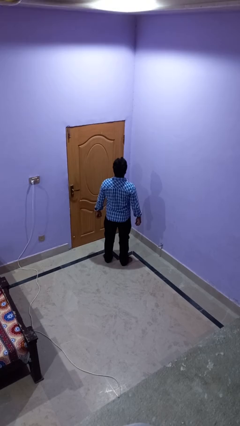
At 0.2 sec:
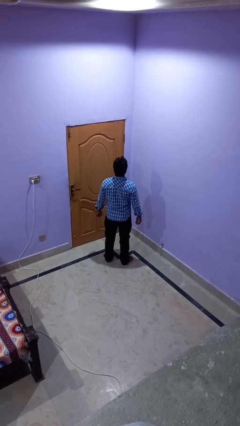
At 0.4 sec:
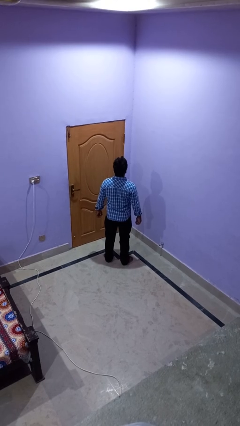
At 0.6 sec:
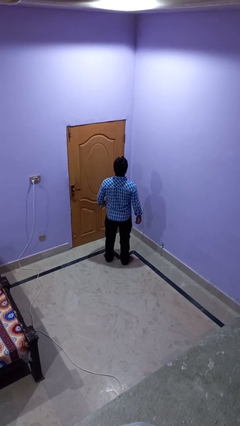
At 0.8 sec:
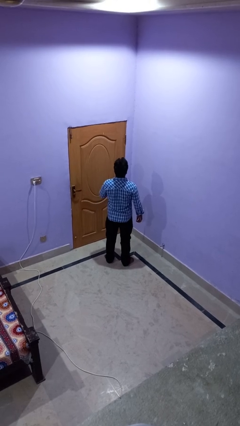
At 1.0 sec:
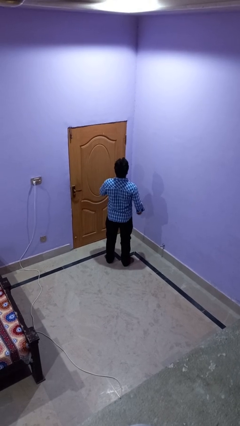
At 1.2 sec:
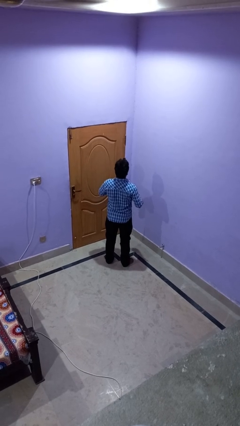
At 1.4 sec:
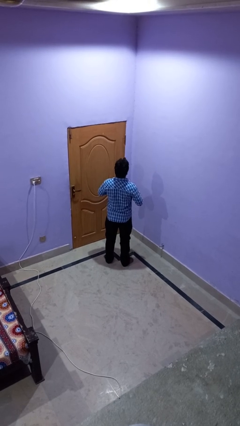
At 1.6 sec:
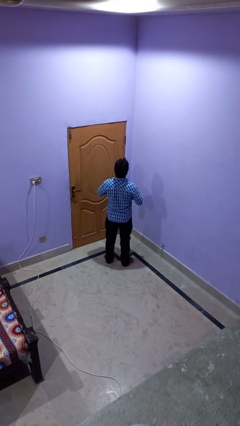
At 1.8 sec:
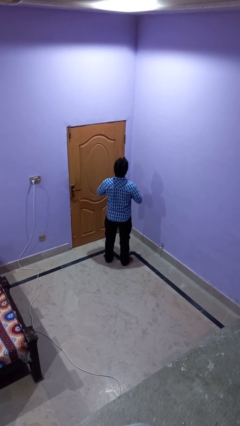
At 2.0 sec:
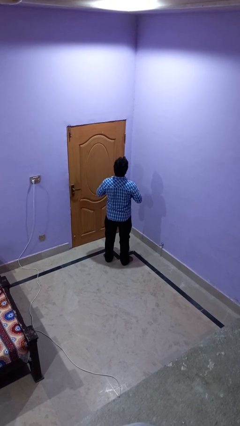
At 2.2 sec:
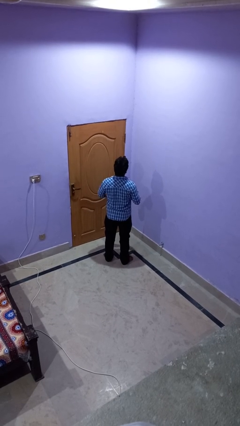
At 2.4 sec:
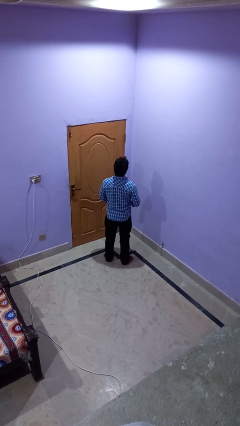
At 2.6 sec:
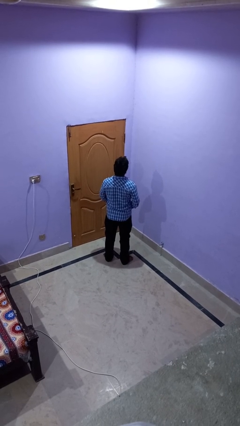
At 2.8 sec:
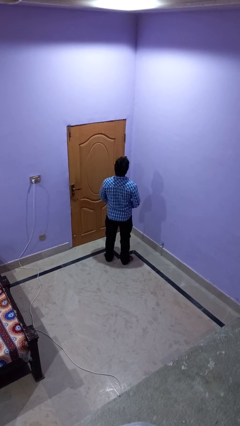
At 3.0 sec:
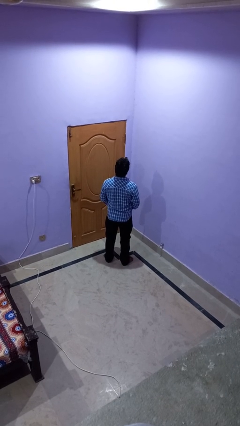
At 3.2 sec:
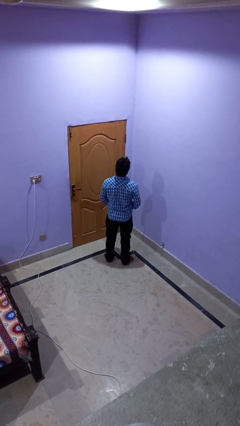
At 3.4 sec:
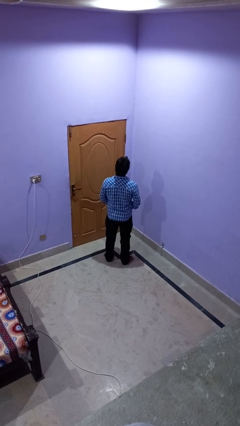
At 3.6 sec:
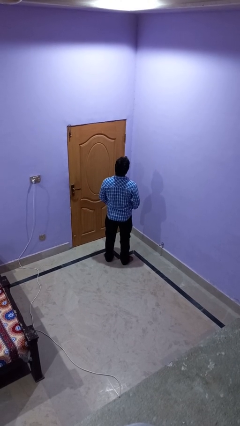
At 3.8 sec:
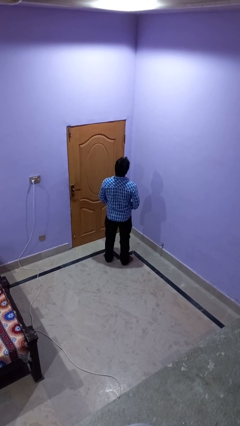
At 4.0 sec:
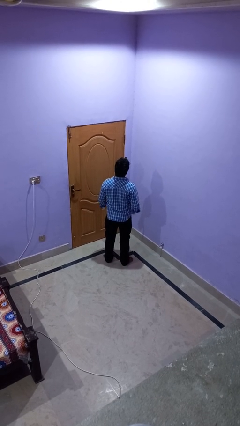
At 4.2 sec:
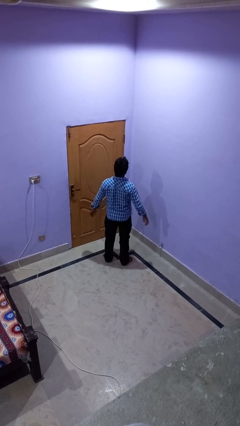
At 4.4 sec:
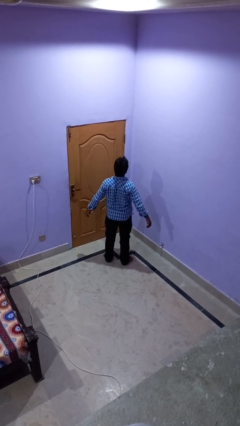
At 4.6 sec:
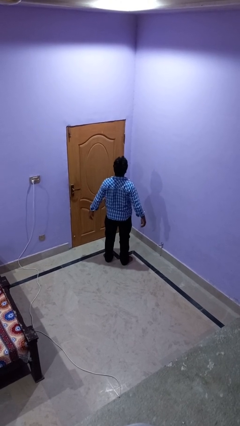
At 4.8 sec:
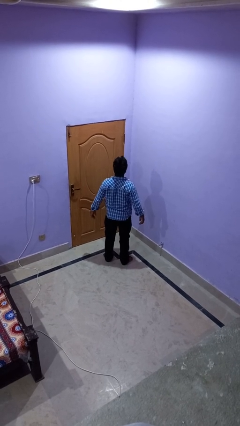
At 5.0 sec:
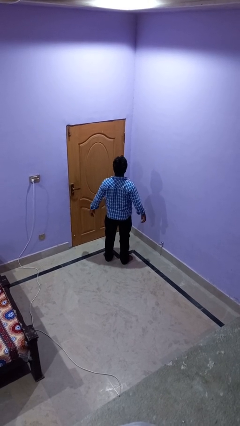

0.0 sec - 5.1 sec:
person unbuttons shirt

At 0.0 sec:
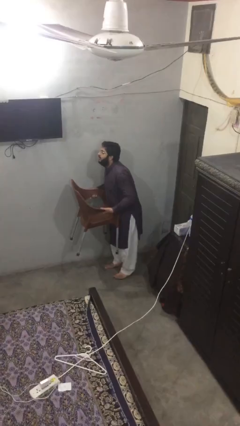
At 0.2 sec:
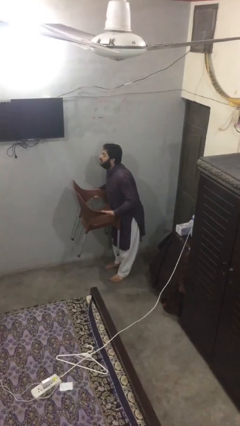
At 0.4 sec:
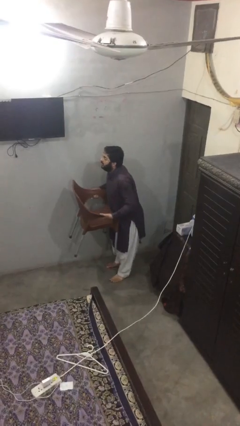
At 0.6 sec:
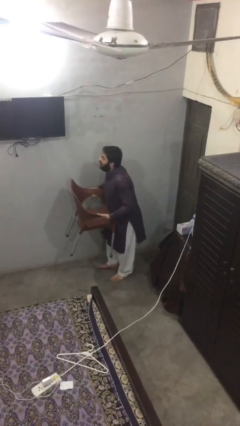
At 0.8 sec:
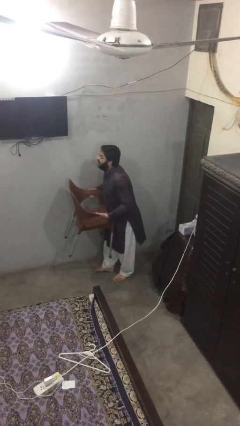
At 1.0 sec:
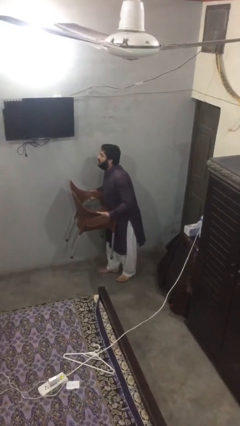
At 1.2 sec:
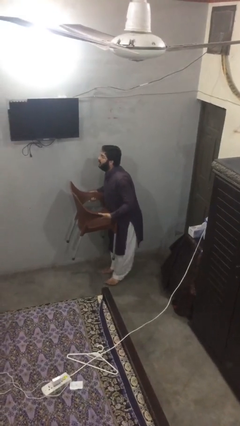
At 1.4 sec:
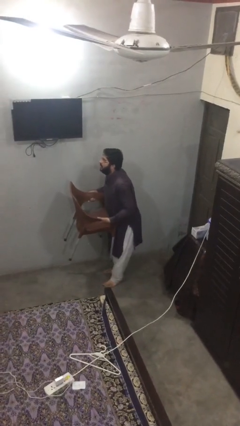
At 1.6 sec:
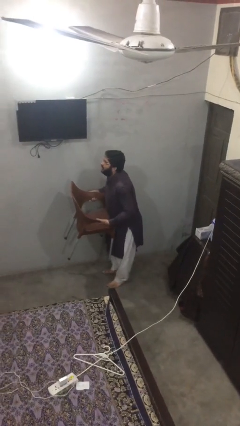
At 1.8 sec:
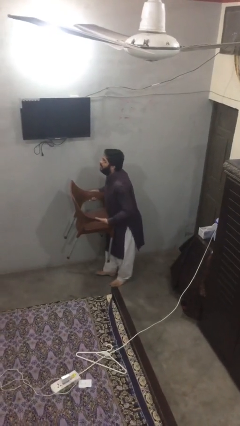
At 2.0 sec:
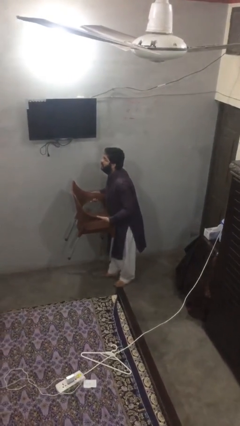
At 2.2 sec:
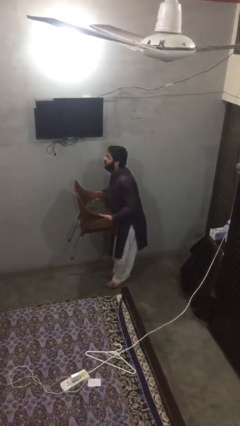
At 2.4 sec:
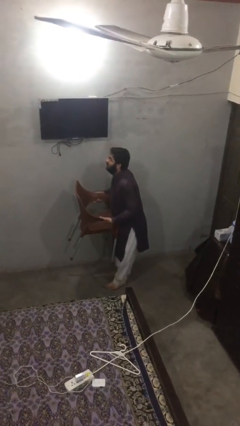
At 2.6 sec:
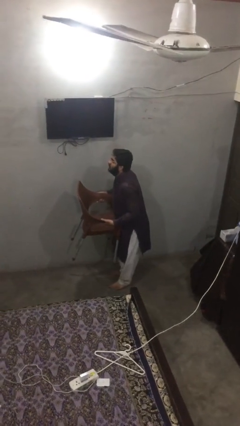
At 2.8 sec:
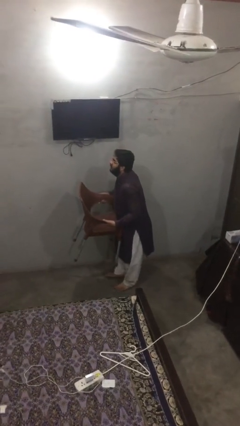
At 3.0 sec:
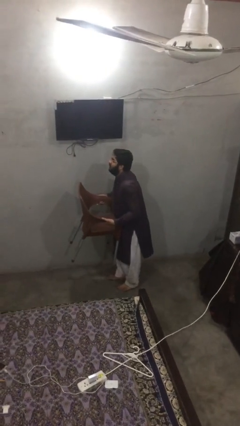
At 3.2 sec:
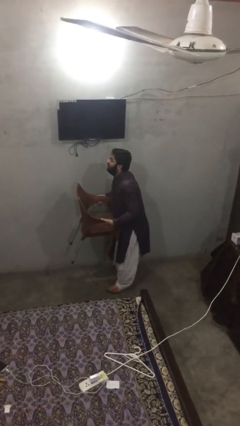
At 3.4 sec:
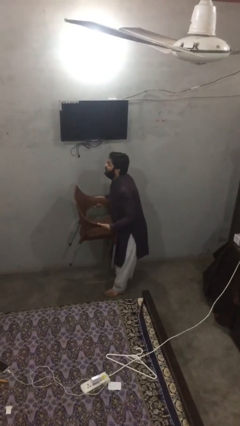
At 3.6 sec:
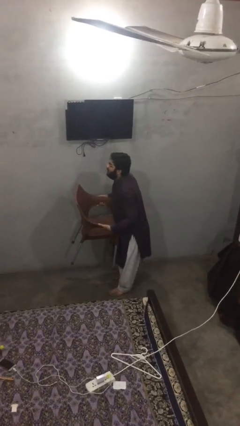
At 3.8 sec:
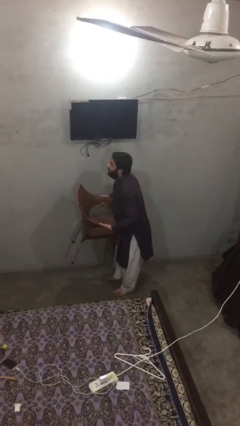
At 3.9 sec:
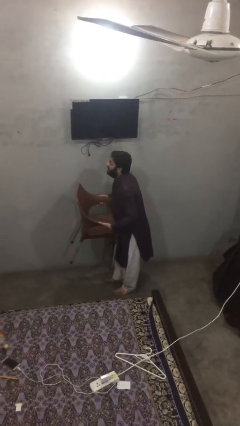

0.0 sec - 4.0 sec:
person carries heavy object

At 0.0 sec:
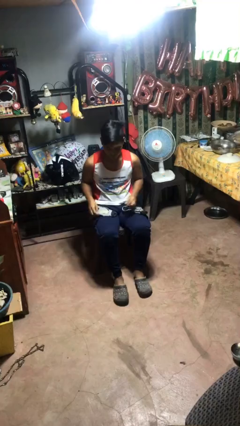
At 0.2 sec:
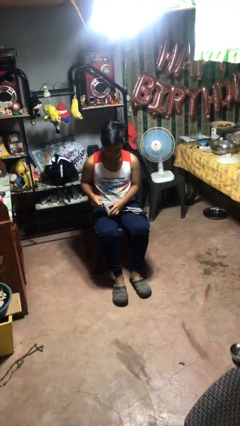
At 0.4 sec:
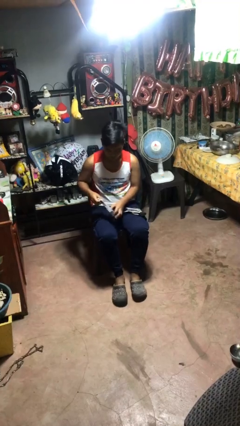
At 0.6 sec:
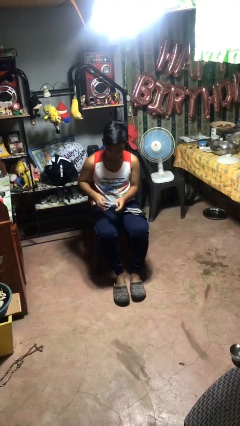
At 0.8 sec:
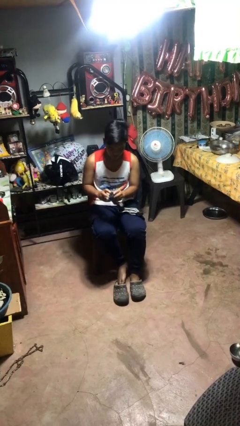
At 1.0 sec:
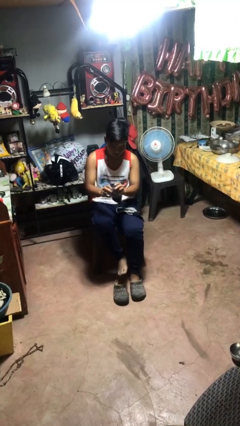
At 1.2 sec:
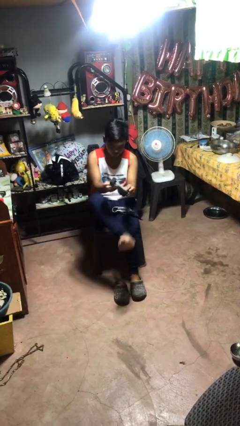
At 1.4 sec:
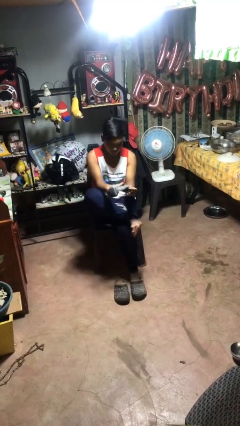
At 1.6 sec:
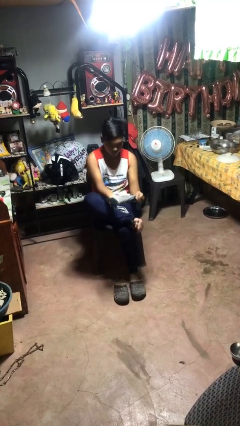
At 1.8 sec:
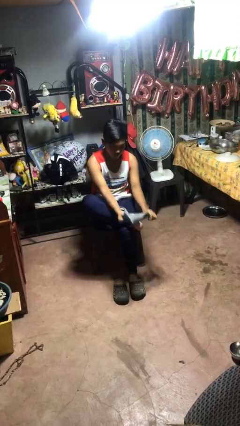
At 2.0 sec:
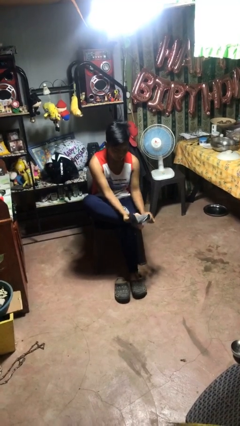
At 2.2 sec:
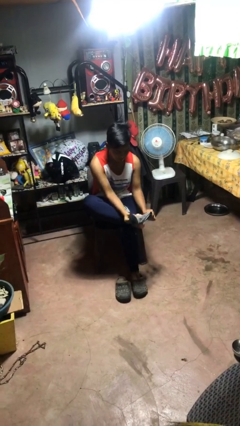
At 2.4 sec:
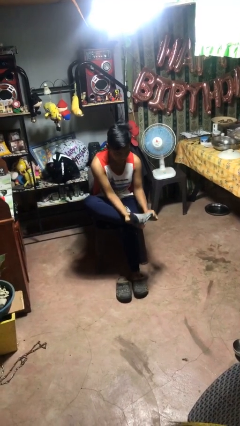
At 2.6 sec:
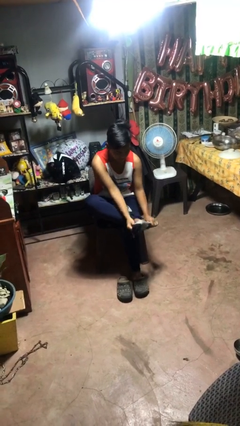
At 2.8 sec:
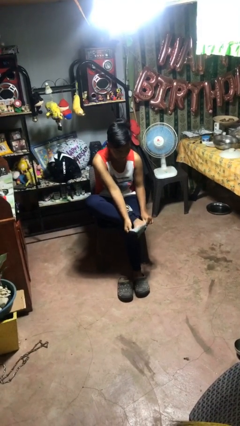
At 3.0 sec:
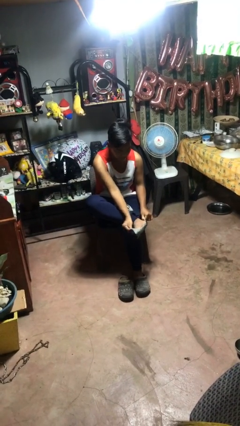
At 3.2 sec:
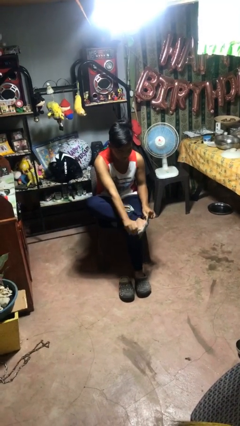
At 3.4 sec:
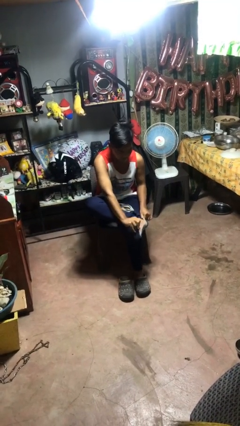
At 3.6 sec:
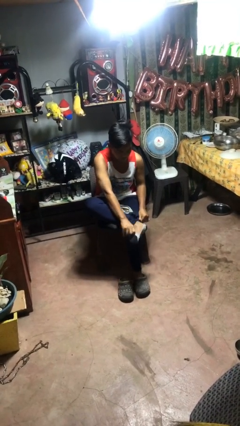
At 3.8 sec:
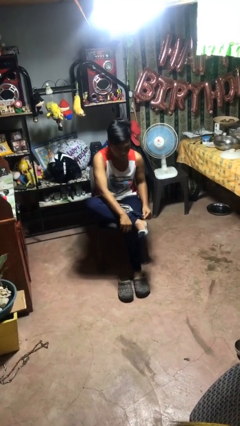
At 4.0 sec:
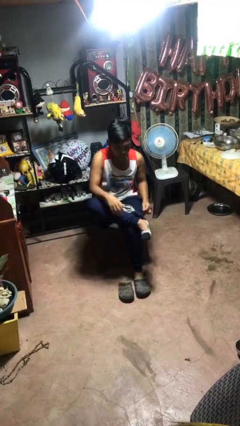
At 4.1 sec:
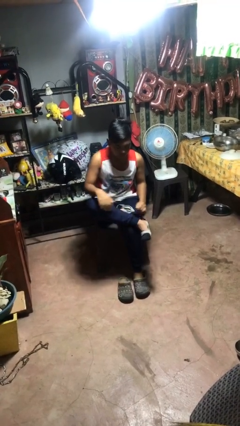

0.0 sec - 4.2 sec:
person puts on socks

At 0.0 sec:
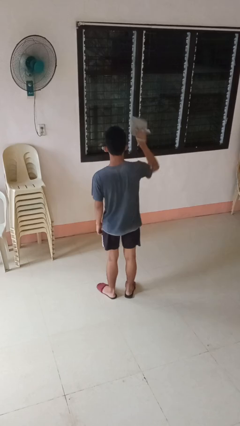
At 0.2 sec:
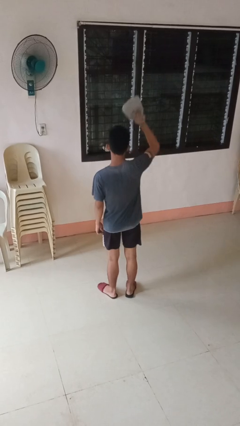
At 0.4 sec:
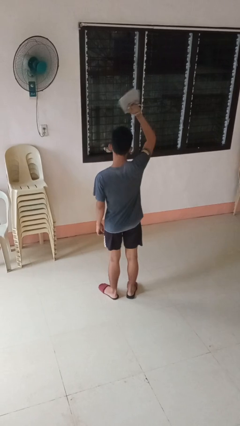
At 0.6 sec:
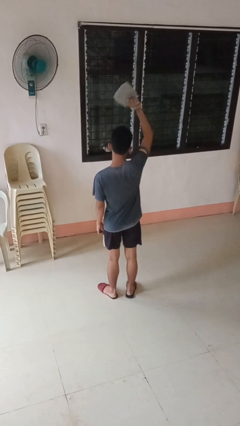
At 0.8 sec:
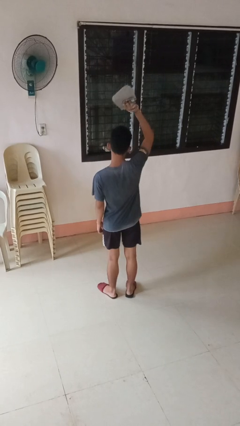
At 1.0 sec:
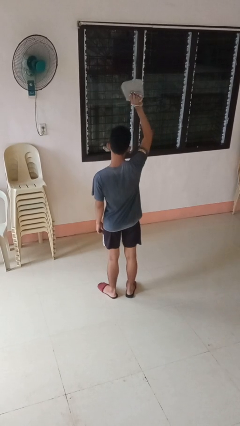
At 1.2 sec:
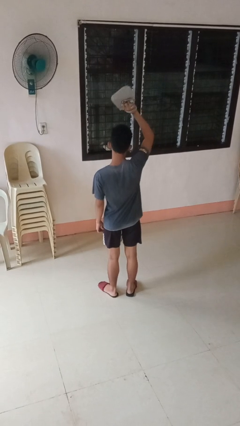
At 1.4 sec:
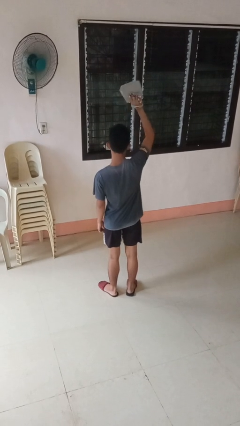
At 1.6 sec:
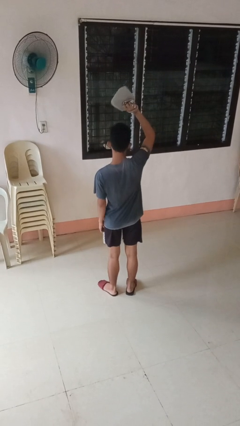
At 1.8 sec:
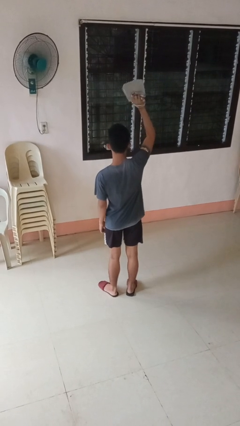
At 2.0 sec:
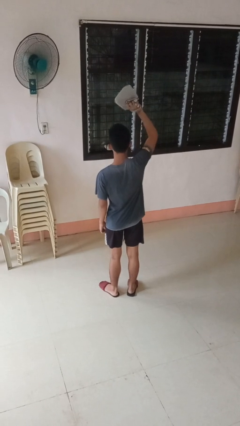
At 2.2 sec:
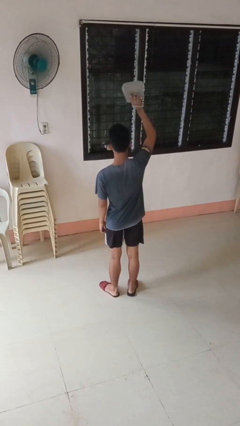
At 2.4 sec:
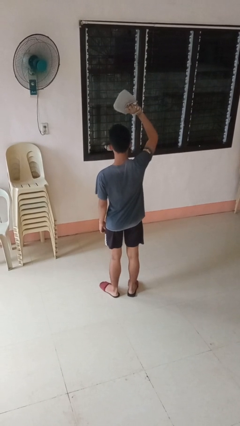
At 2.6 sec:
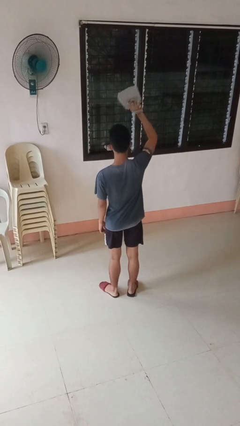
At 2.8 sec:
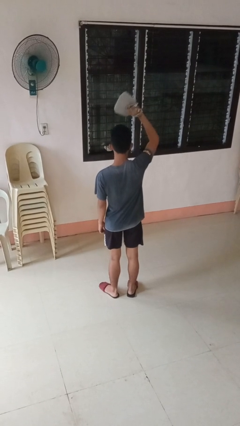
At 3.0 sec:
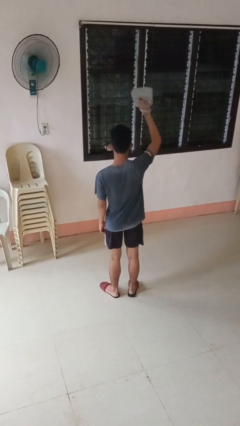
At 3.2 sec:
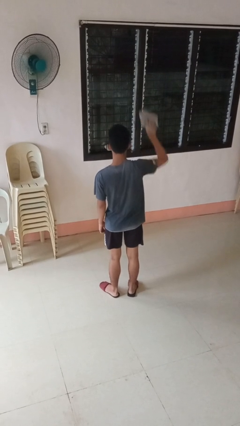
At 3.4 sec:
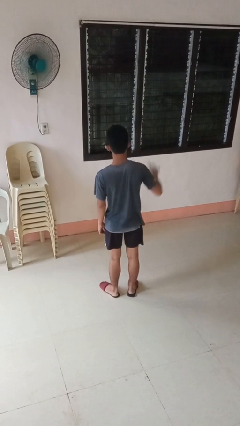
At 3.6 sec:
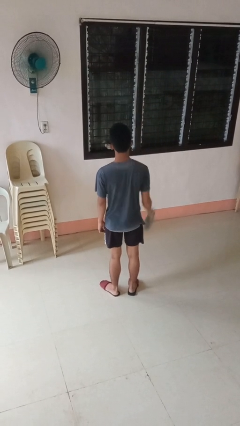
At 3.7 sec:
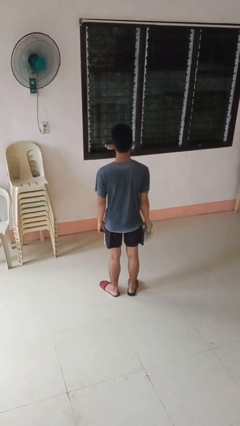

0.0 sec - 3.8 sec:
person holds object above head

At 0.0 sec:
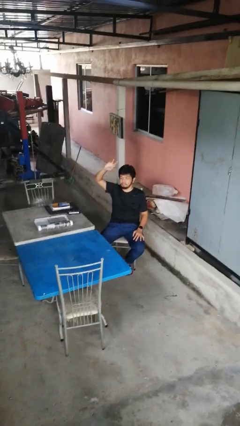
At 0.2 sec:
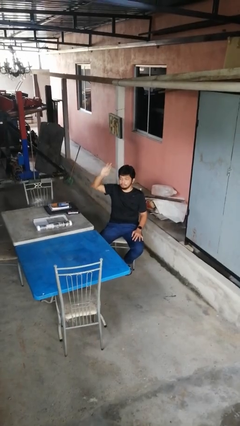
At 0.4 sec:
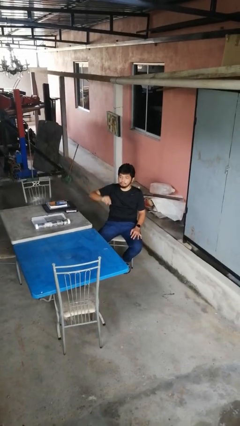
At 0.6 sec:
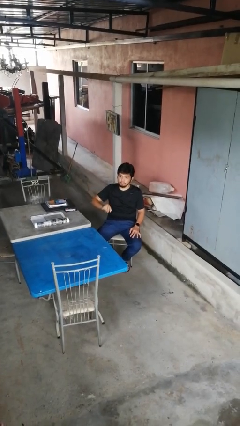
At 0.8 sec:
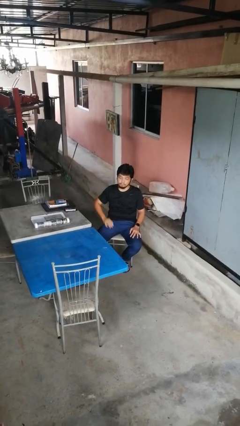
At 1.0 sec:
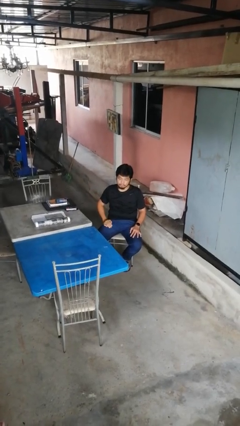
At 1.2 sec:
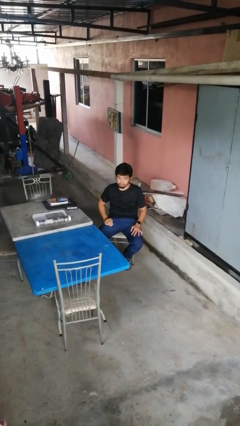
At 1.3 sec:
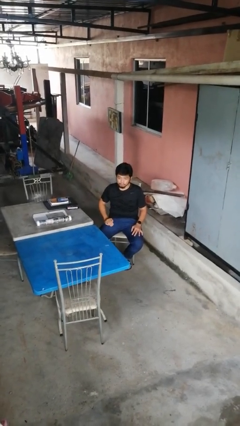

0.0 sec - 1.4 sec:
person gestures swipe down
